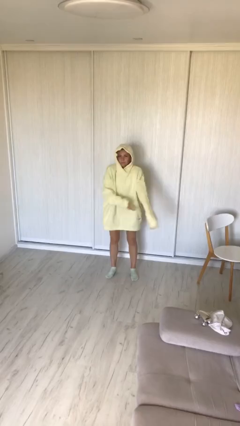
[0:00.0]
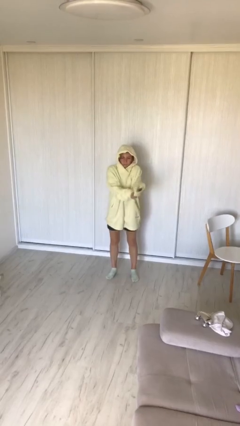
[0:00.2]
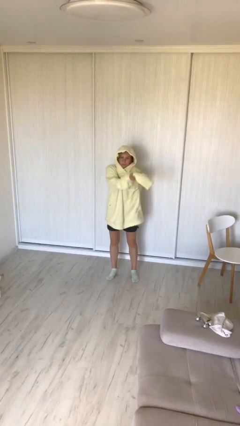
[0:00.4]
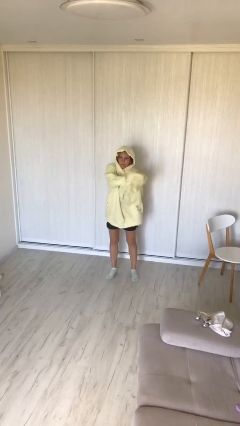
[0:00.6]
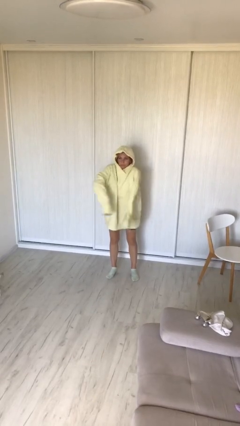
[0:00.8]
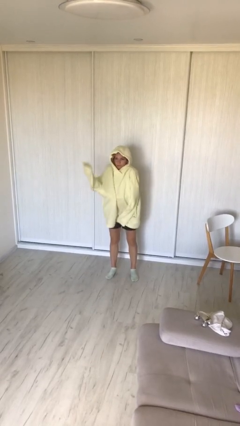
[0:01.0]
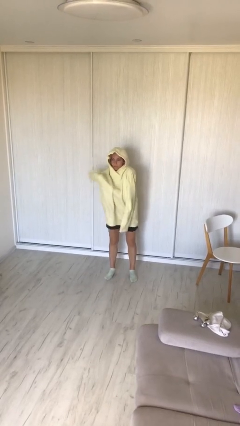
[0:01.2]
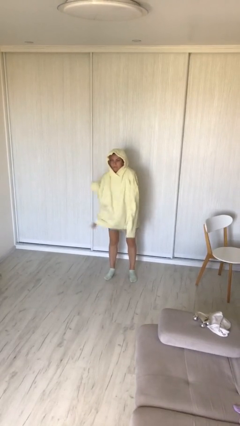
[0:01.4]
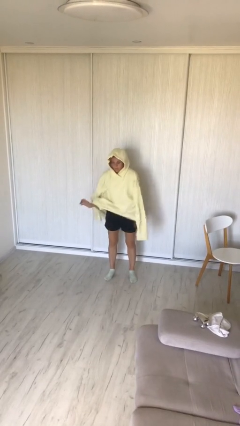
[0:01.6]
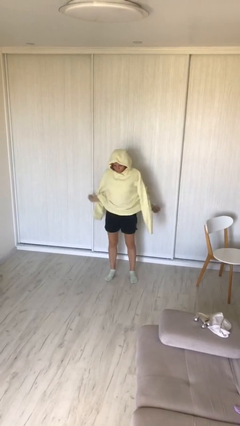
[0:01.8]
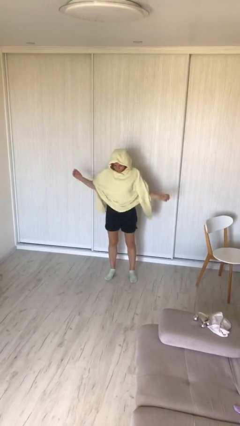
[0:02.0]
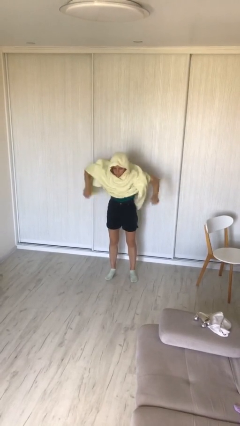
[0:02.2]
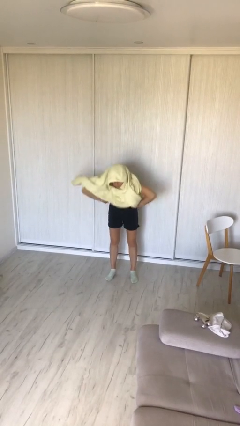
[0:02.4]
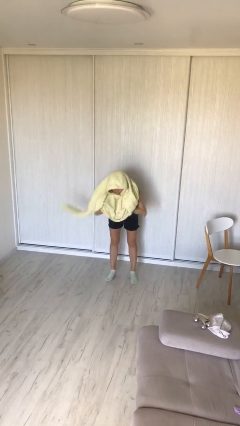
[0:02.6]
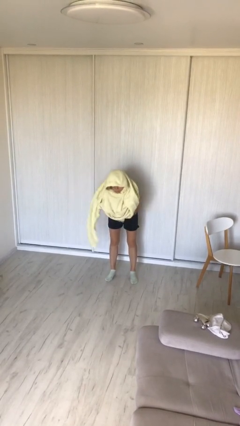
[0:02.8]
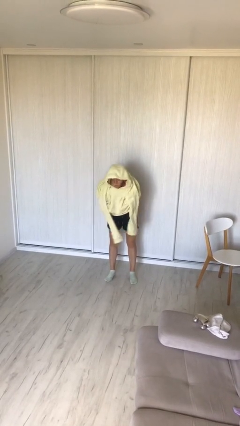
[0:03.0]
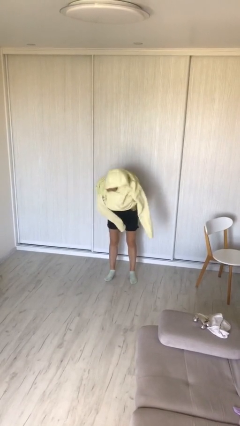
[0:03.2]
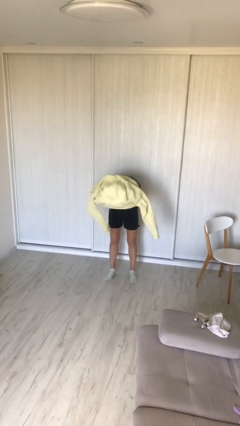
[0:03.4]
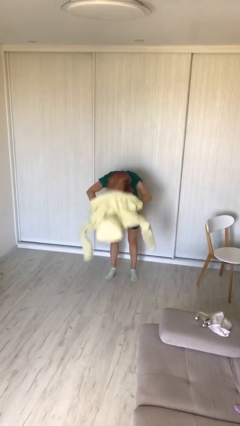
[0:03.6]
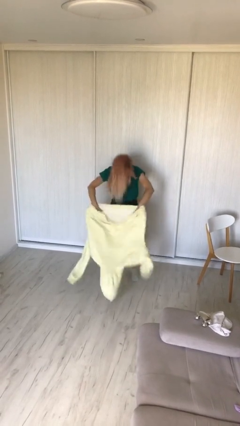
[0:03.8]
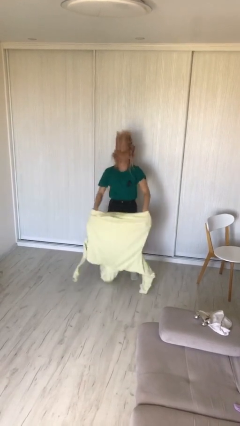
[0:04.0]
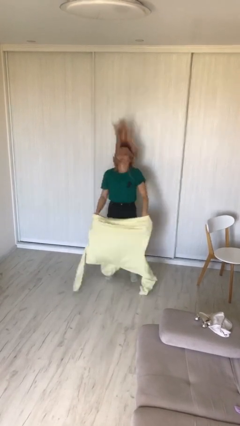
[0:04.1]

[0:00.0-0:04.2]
person takes off hoodie

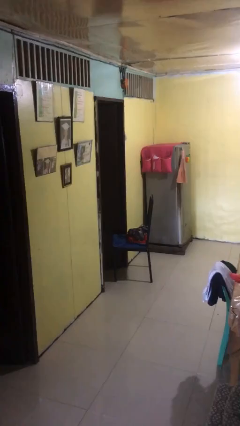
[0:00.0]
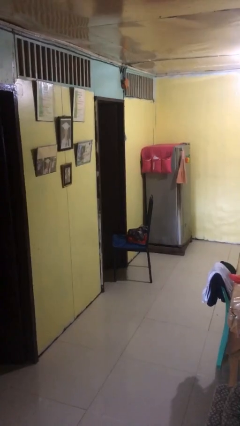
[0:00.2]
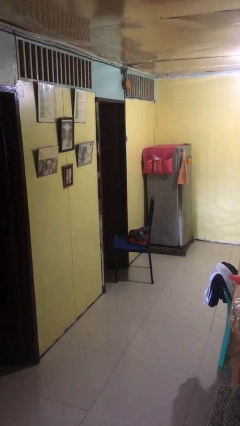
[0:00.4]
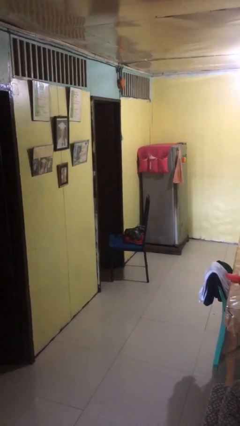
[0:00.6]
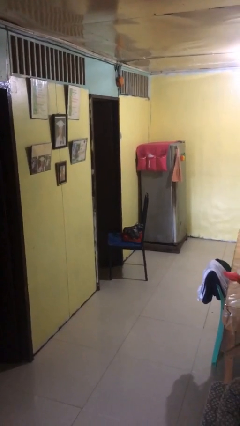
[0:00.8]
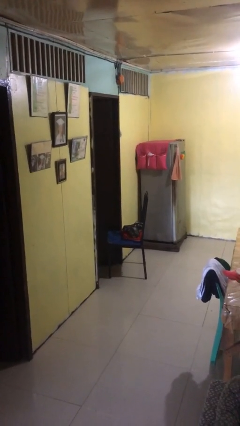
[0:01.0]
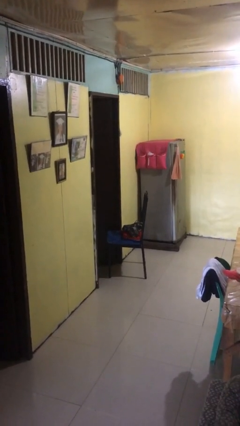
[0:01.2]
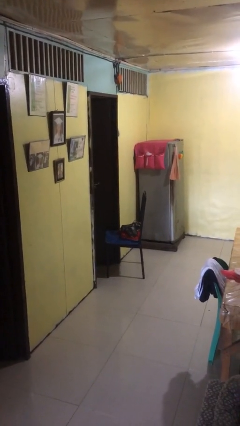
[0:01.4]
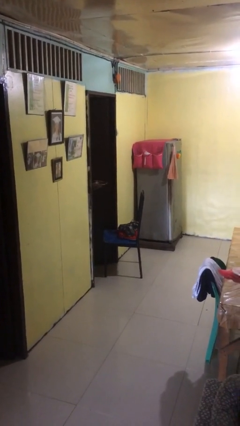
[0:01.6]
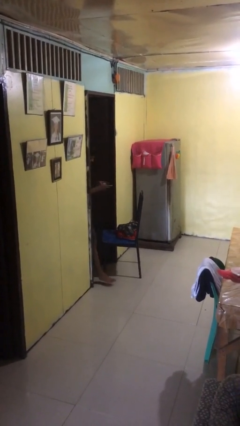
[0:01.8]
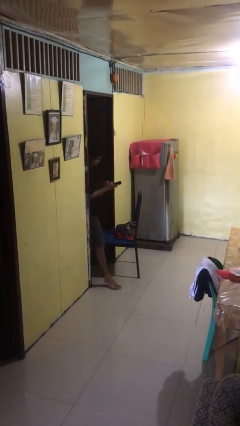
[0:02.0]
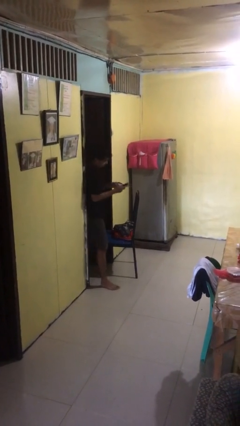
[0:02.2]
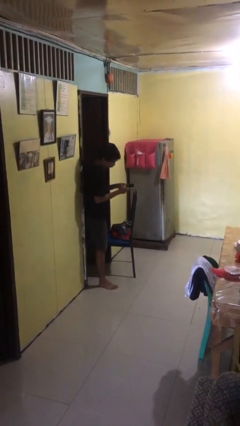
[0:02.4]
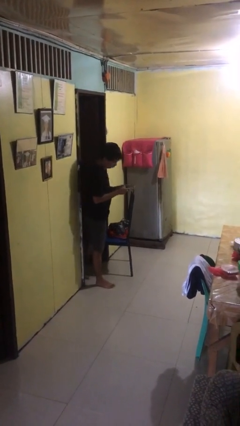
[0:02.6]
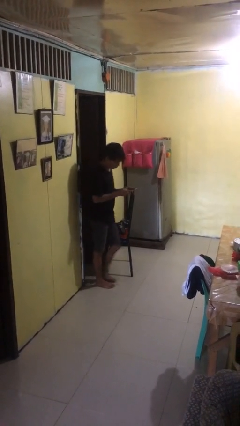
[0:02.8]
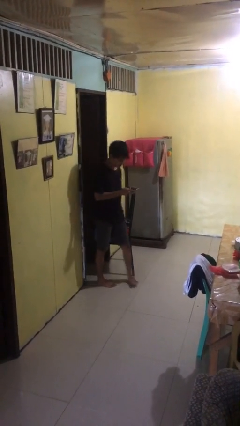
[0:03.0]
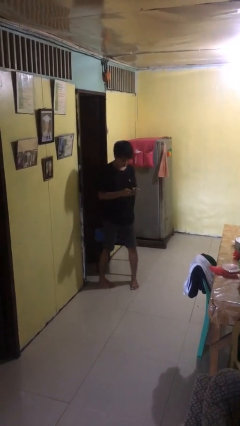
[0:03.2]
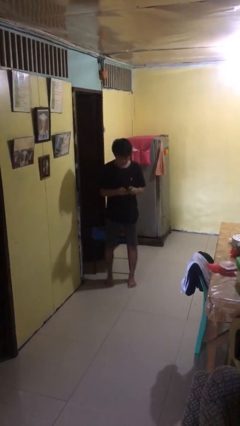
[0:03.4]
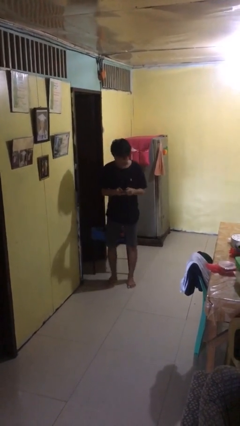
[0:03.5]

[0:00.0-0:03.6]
person enters scene through structure

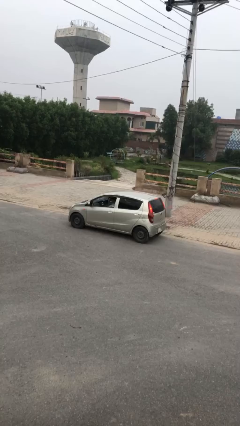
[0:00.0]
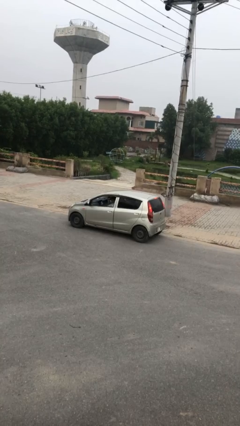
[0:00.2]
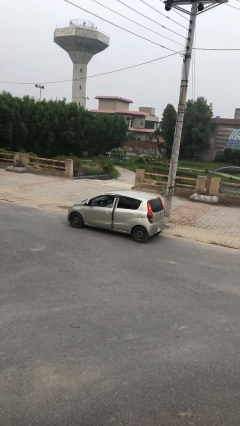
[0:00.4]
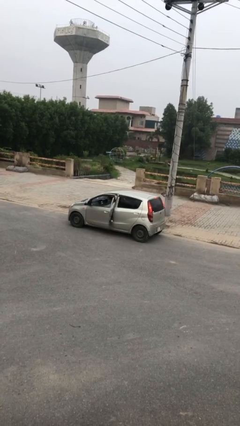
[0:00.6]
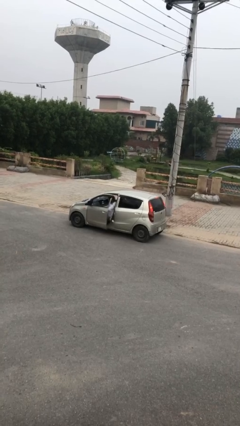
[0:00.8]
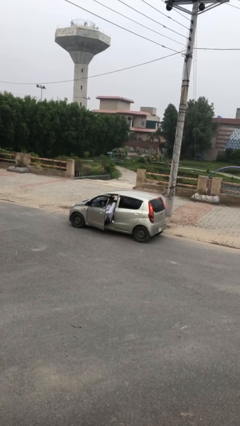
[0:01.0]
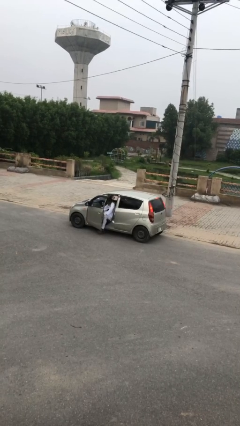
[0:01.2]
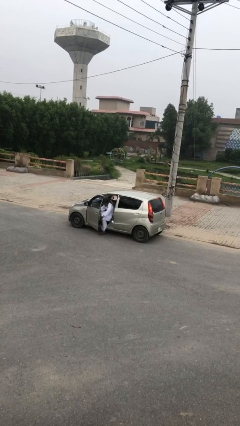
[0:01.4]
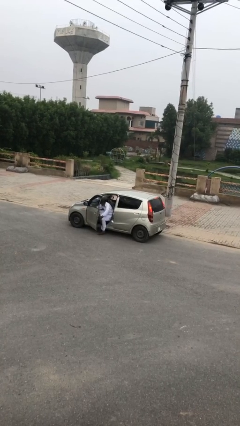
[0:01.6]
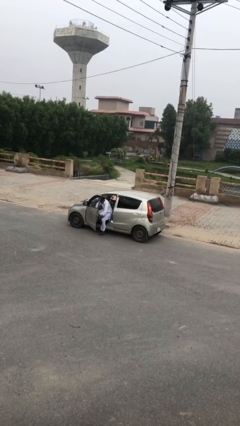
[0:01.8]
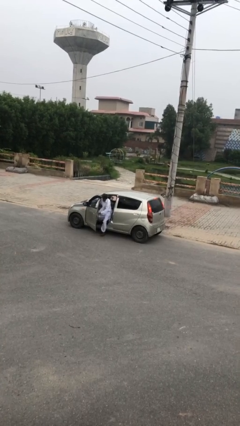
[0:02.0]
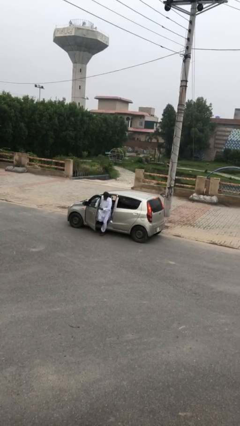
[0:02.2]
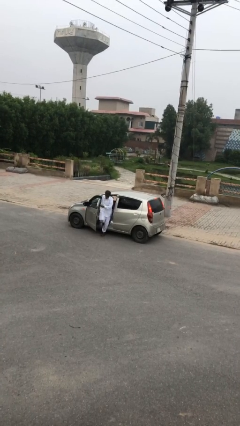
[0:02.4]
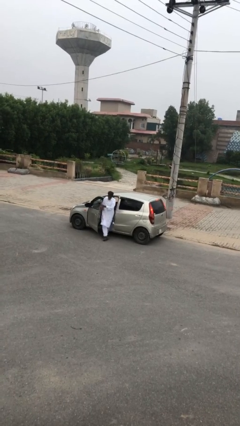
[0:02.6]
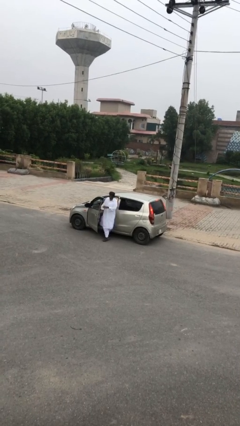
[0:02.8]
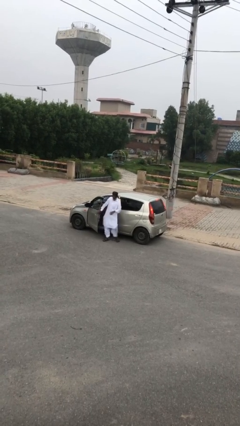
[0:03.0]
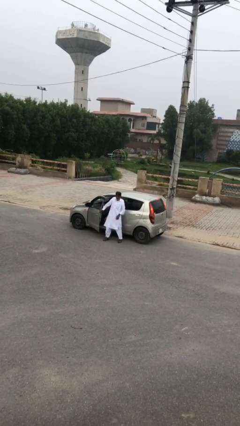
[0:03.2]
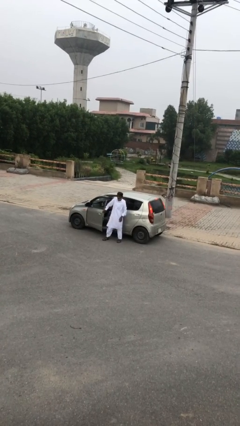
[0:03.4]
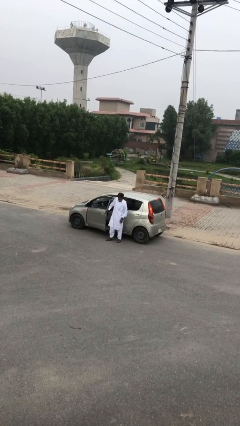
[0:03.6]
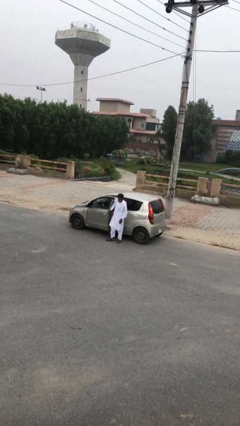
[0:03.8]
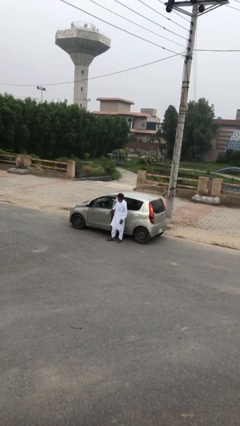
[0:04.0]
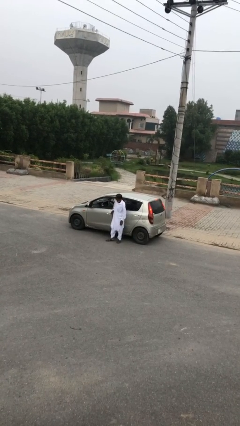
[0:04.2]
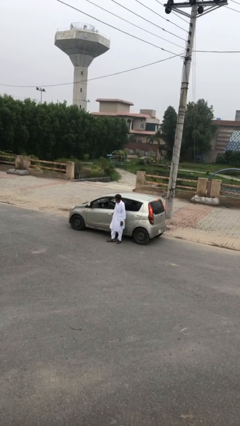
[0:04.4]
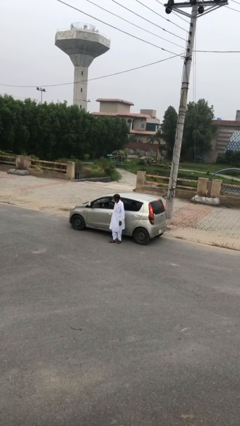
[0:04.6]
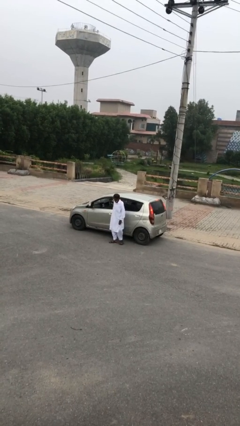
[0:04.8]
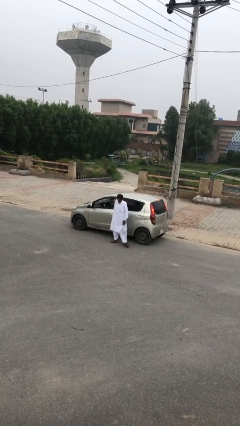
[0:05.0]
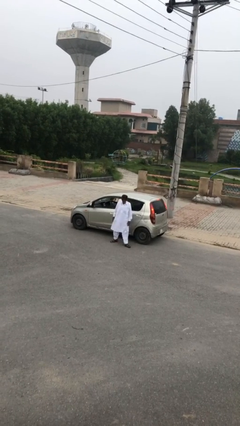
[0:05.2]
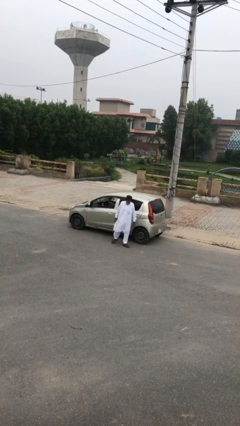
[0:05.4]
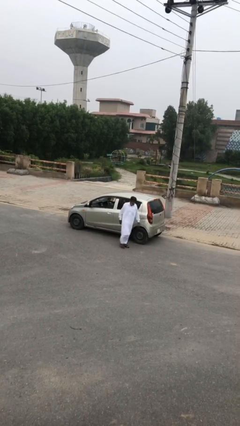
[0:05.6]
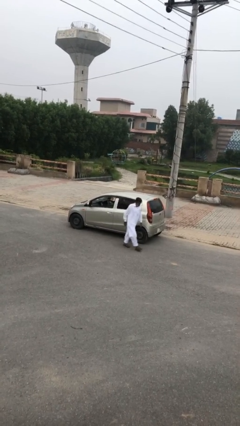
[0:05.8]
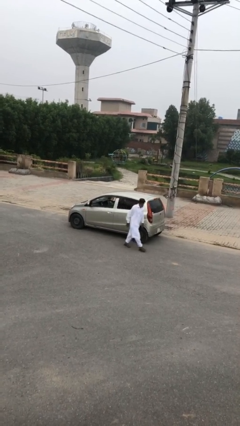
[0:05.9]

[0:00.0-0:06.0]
car drops off person

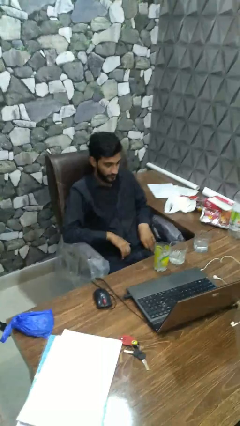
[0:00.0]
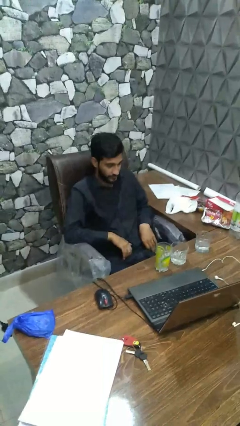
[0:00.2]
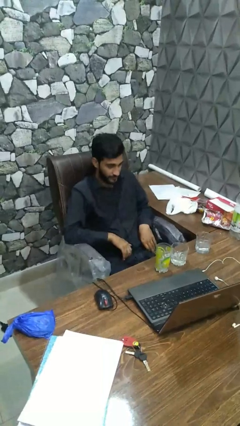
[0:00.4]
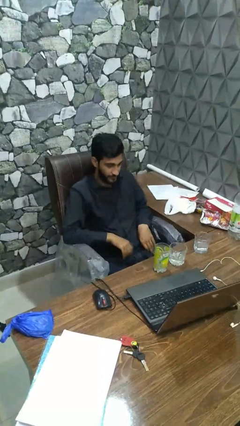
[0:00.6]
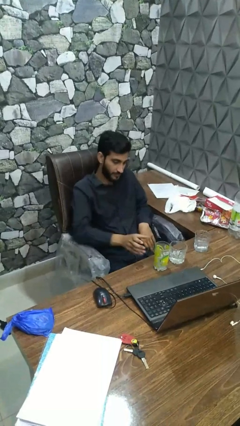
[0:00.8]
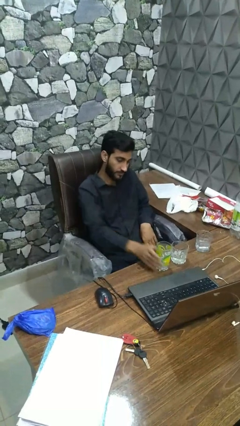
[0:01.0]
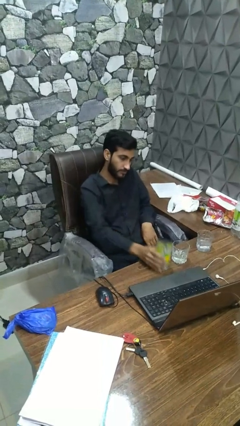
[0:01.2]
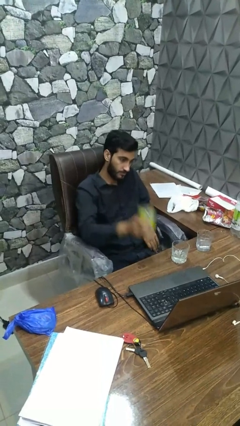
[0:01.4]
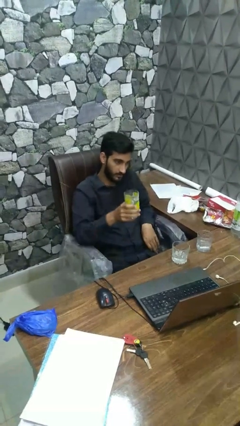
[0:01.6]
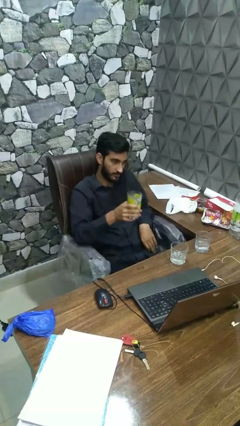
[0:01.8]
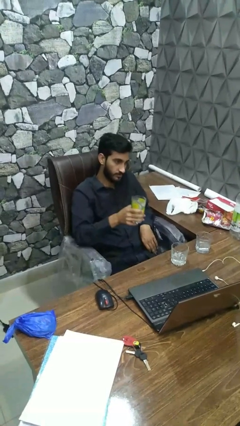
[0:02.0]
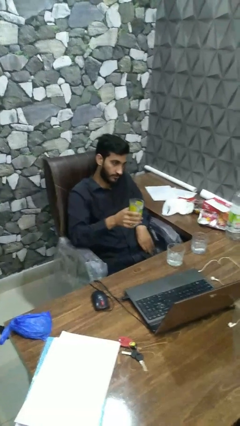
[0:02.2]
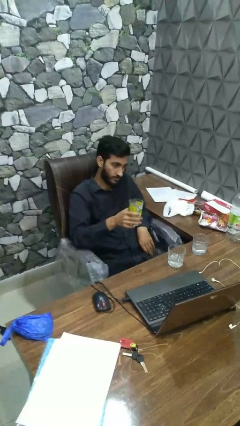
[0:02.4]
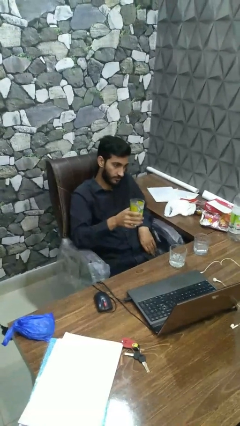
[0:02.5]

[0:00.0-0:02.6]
person picks up object from table

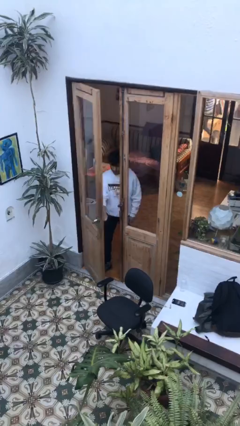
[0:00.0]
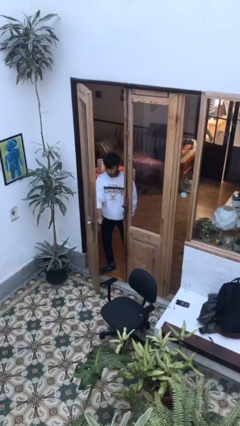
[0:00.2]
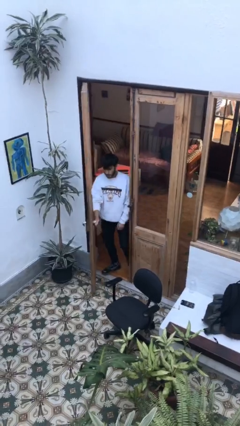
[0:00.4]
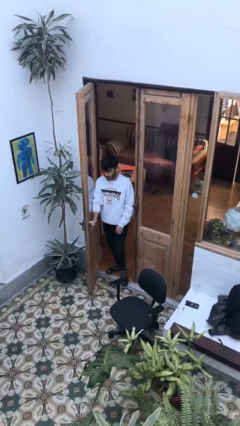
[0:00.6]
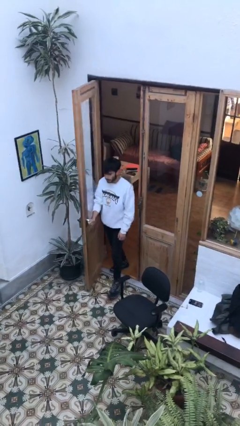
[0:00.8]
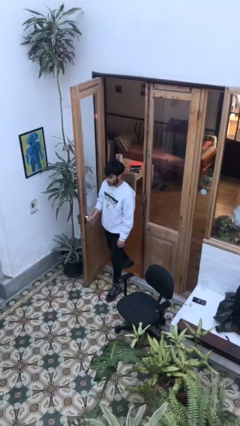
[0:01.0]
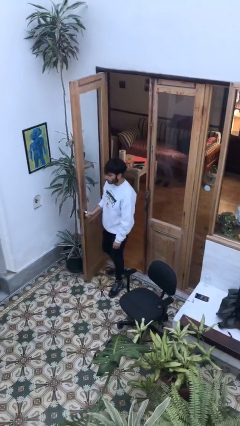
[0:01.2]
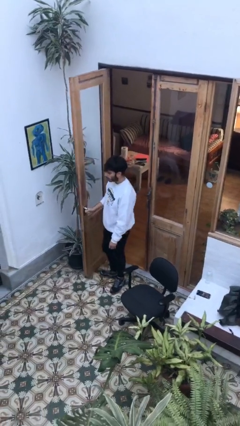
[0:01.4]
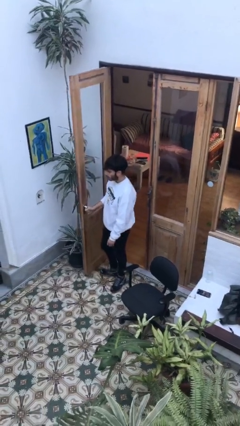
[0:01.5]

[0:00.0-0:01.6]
person opens facility door
